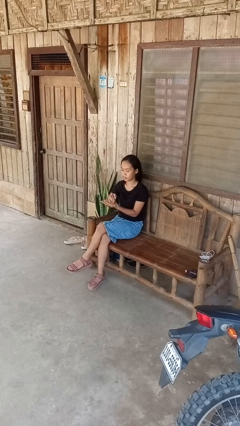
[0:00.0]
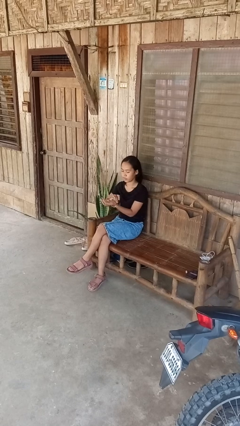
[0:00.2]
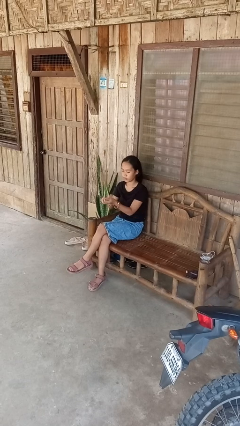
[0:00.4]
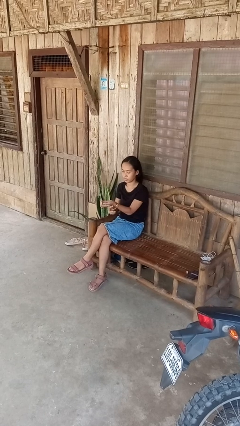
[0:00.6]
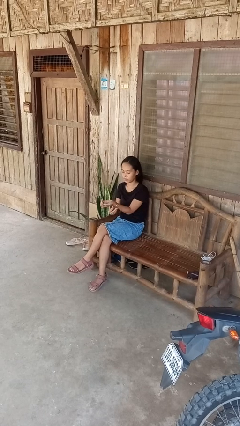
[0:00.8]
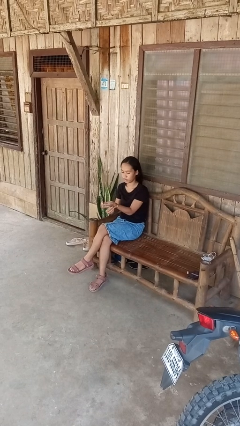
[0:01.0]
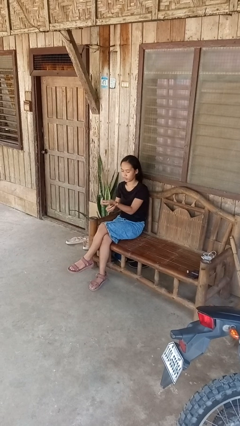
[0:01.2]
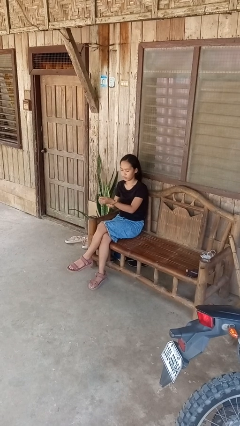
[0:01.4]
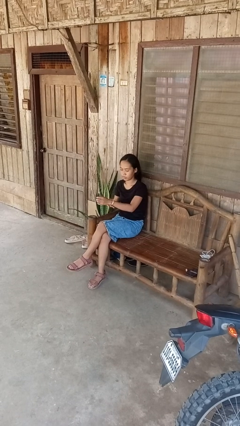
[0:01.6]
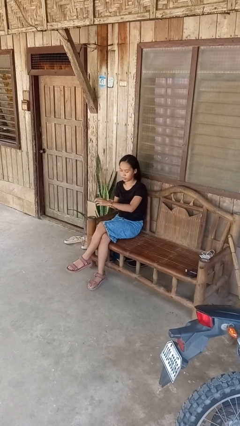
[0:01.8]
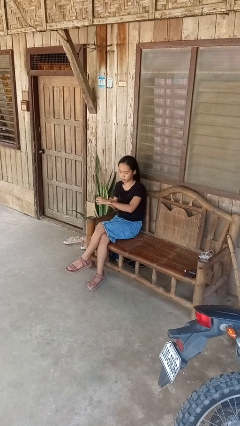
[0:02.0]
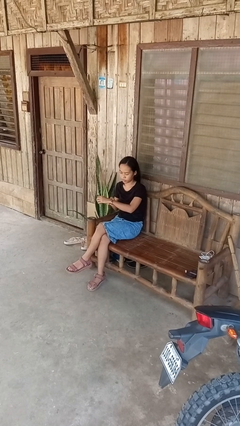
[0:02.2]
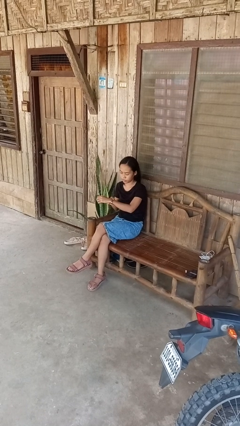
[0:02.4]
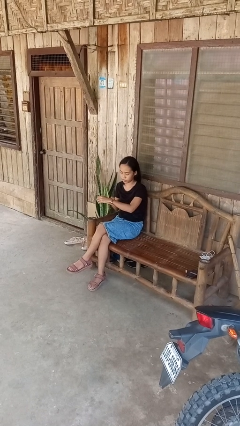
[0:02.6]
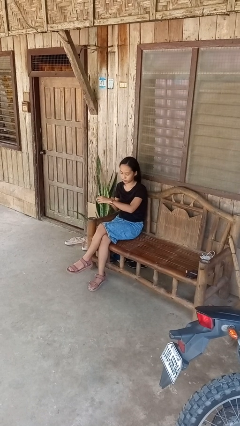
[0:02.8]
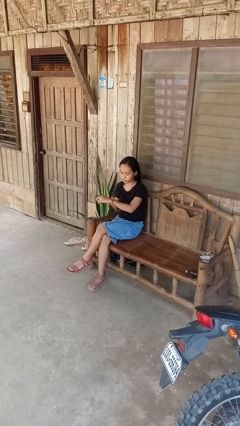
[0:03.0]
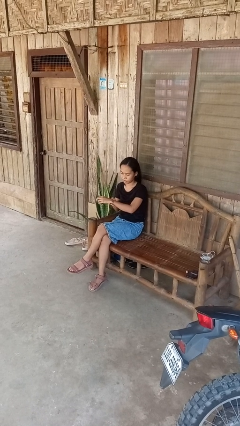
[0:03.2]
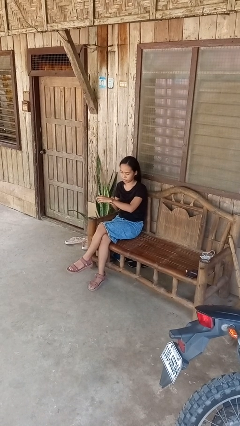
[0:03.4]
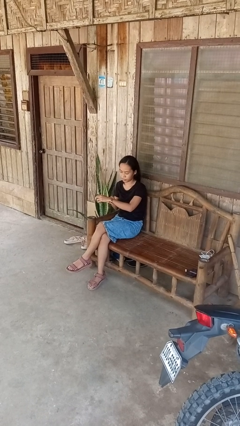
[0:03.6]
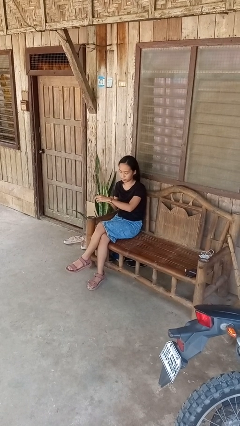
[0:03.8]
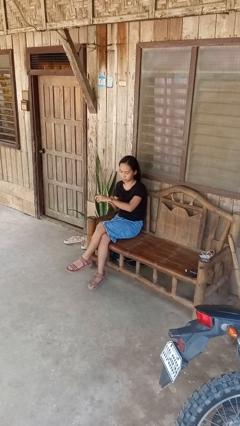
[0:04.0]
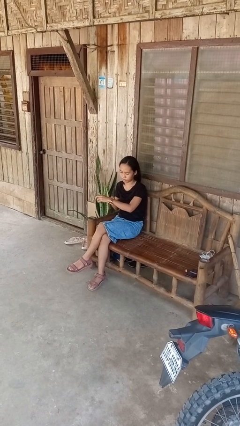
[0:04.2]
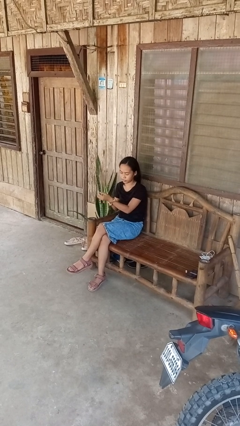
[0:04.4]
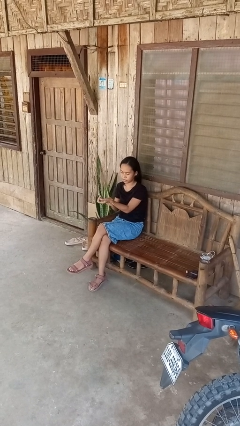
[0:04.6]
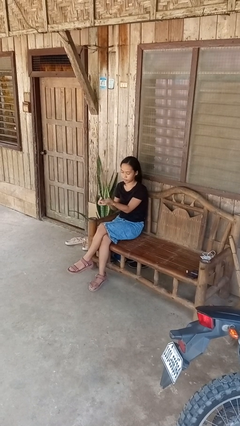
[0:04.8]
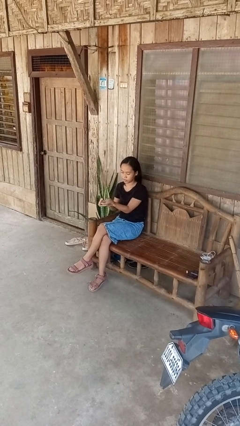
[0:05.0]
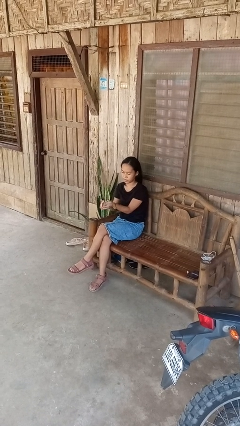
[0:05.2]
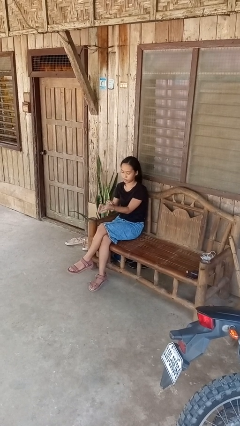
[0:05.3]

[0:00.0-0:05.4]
person puts on wristwatch

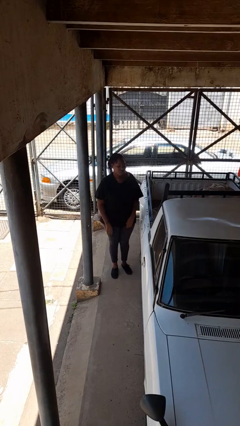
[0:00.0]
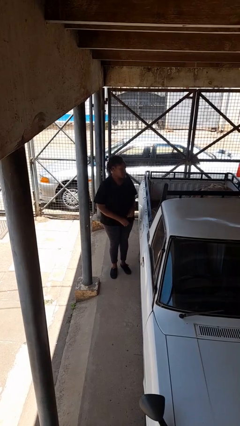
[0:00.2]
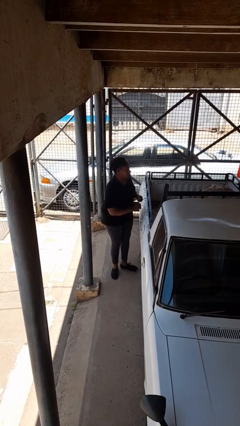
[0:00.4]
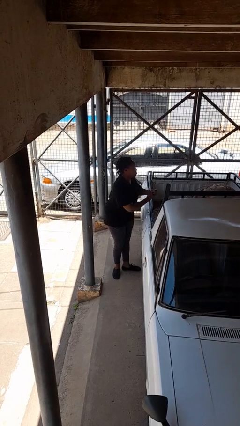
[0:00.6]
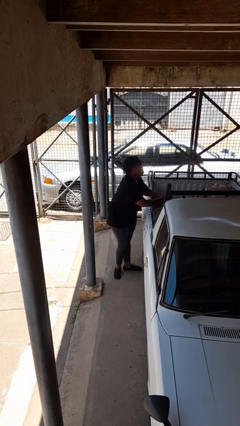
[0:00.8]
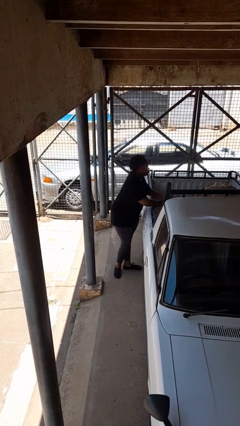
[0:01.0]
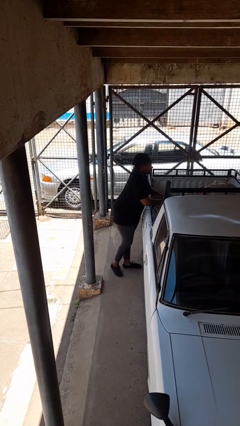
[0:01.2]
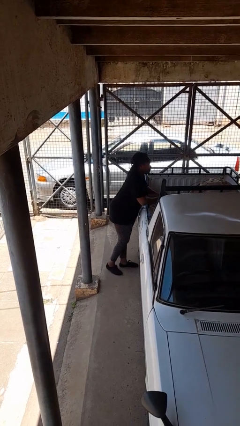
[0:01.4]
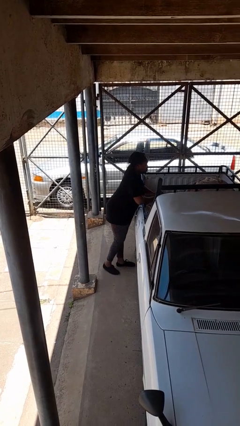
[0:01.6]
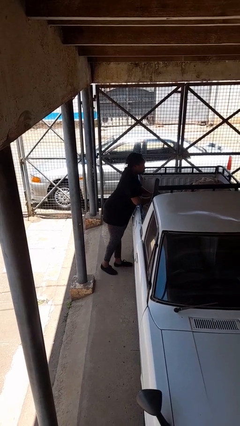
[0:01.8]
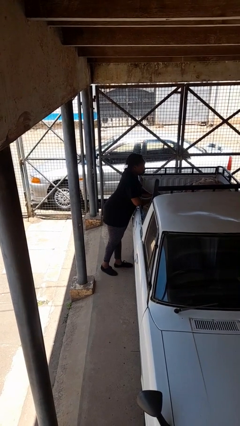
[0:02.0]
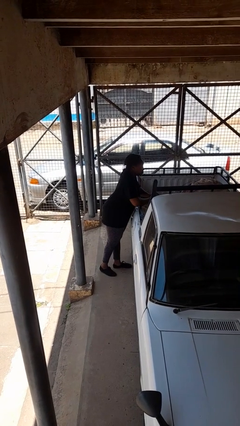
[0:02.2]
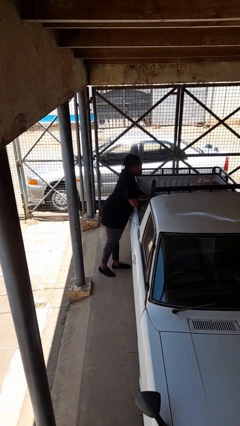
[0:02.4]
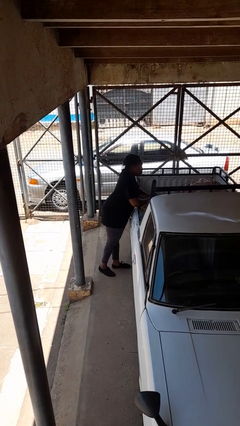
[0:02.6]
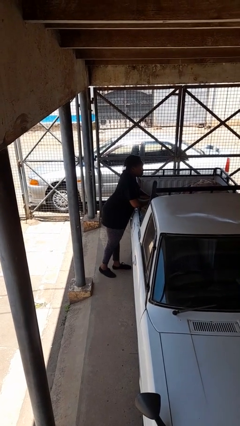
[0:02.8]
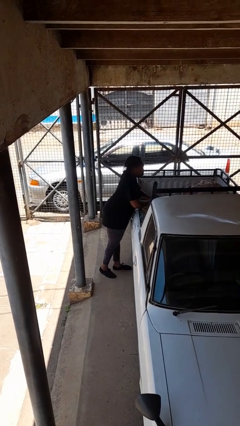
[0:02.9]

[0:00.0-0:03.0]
person leans against car

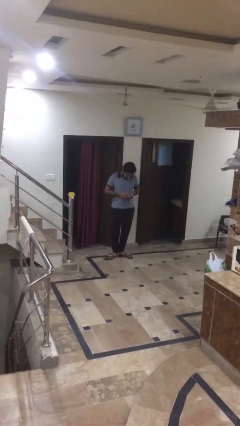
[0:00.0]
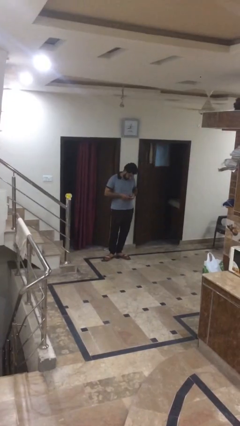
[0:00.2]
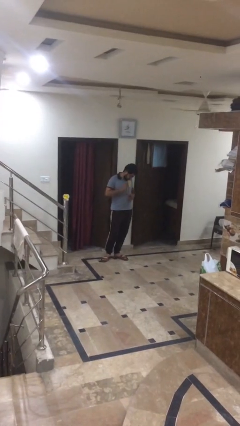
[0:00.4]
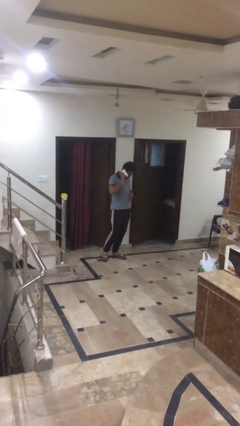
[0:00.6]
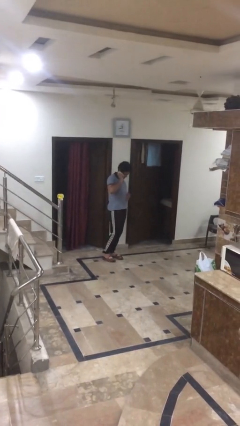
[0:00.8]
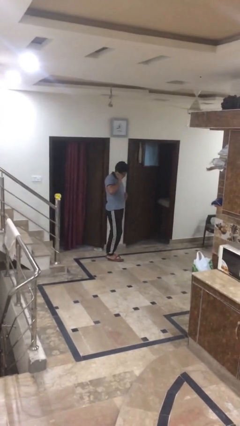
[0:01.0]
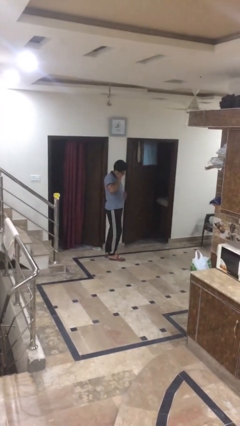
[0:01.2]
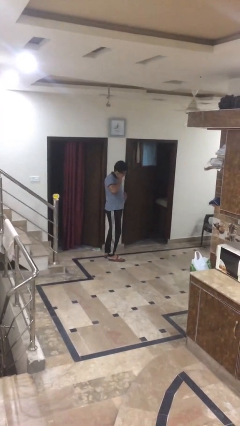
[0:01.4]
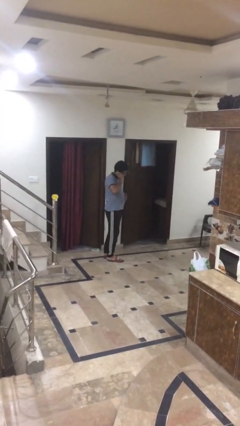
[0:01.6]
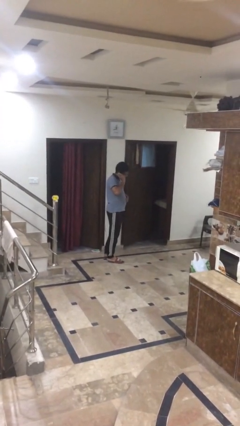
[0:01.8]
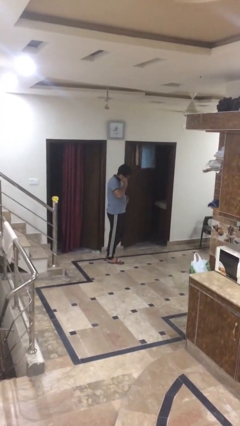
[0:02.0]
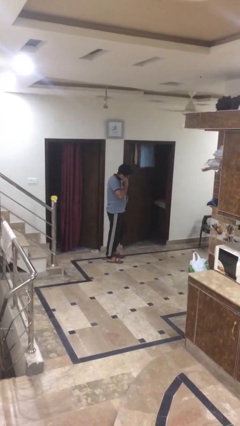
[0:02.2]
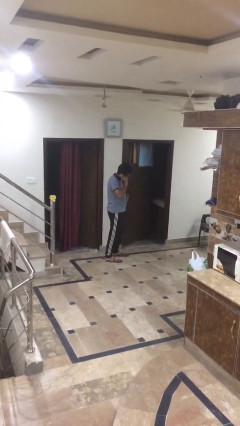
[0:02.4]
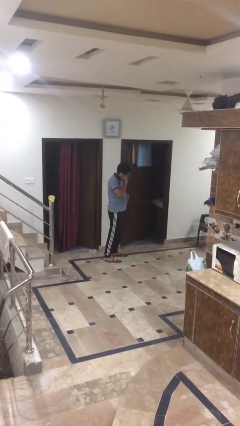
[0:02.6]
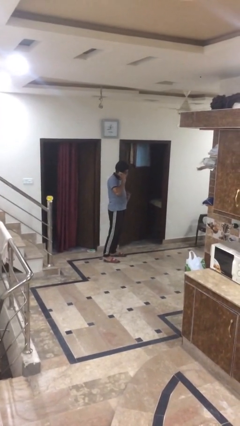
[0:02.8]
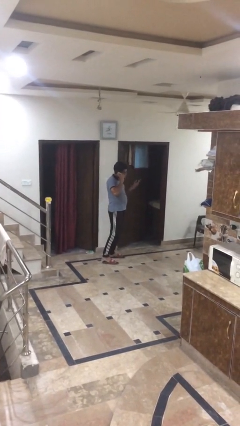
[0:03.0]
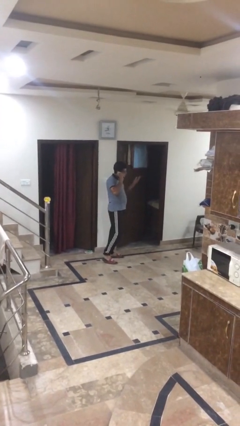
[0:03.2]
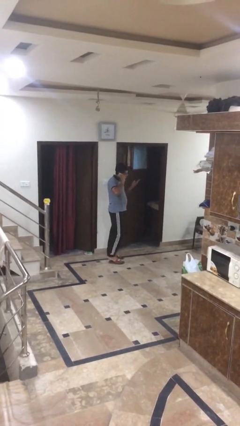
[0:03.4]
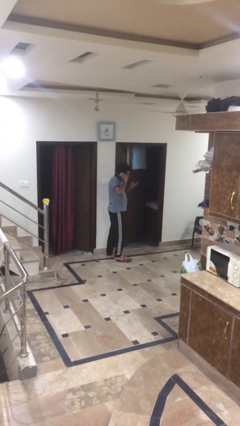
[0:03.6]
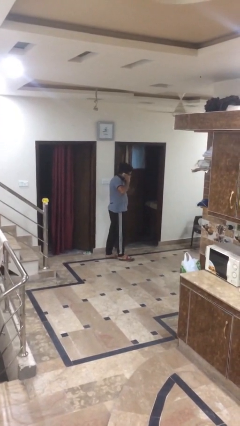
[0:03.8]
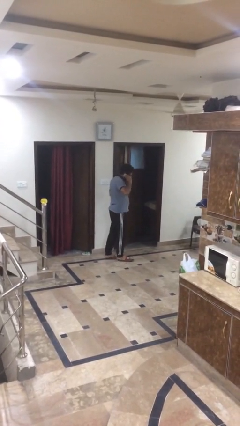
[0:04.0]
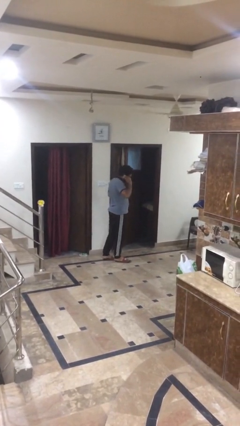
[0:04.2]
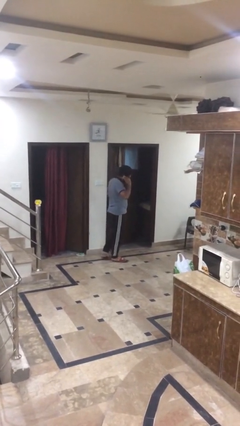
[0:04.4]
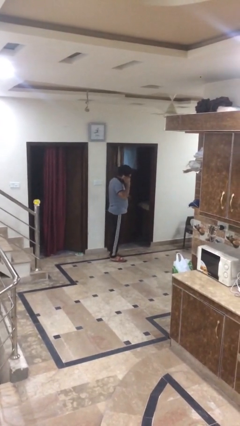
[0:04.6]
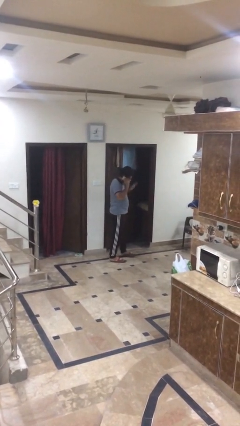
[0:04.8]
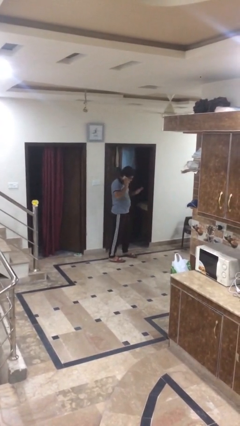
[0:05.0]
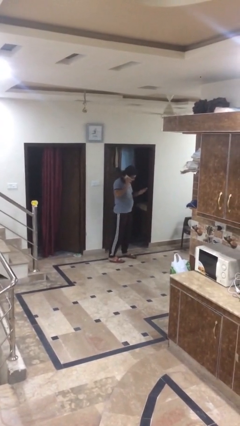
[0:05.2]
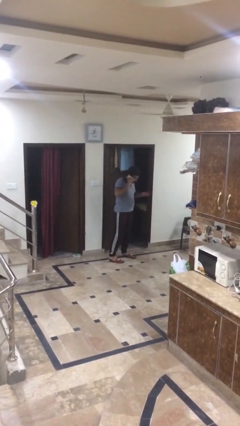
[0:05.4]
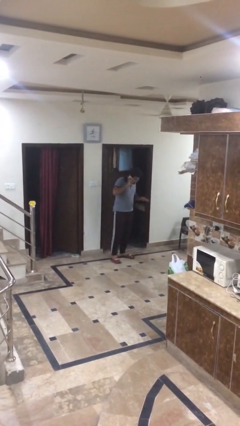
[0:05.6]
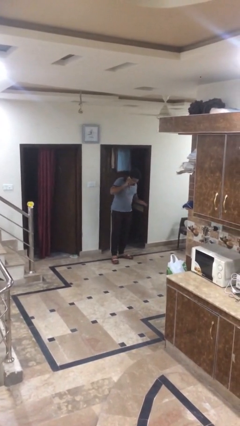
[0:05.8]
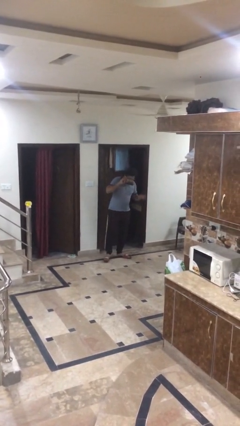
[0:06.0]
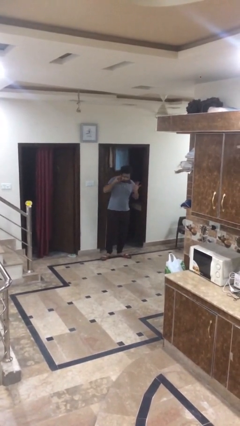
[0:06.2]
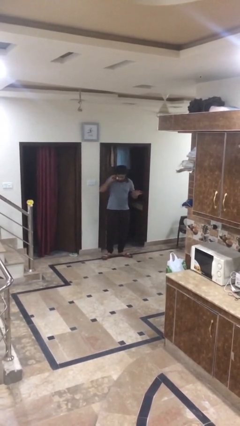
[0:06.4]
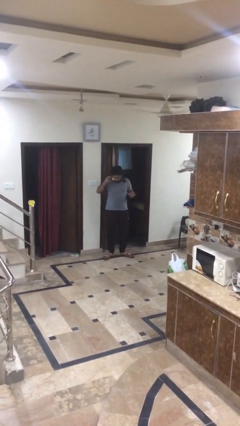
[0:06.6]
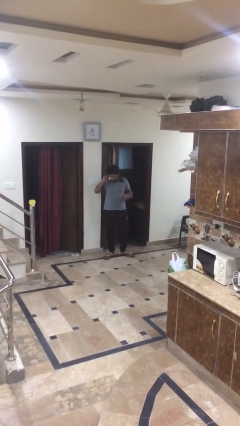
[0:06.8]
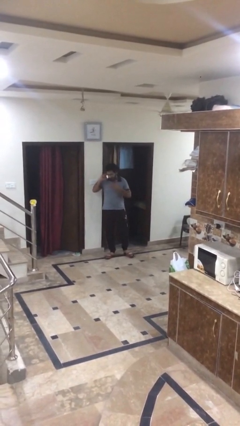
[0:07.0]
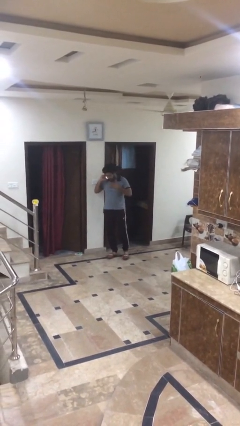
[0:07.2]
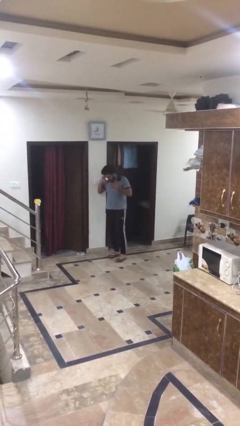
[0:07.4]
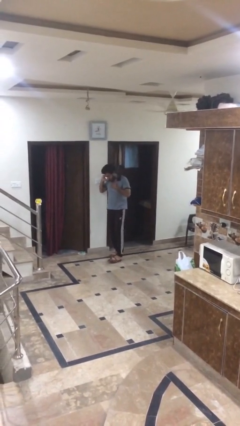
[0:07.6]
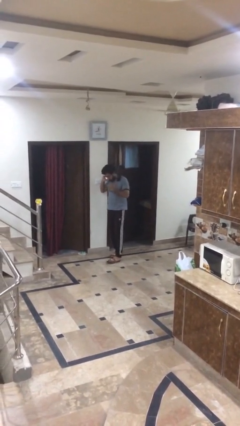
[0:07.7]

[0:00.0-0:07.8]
person talks on phone

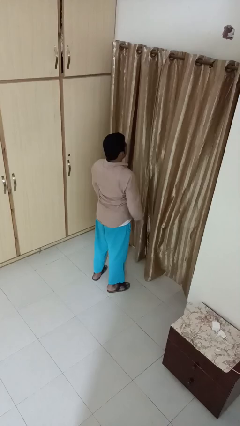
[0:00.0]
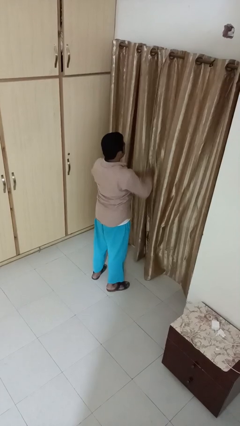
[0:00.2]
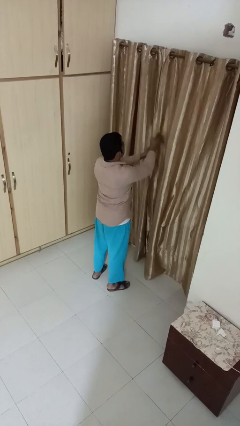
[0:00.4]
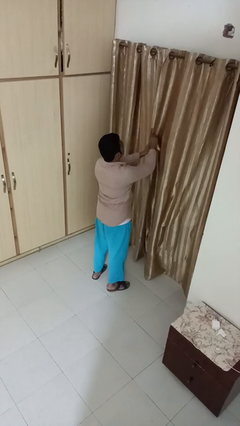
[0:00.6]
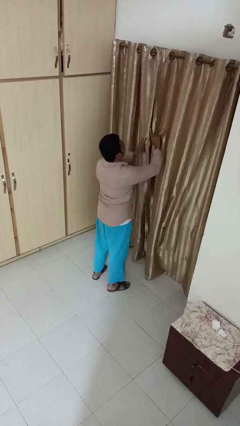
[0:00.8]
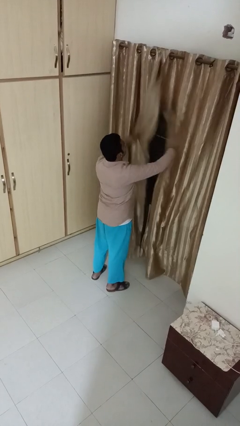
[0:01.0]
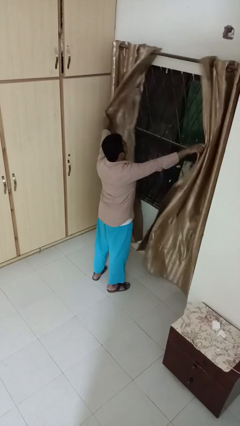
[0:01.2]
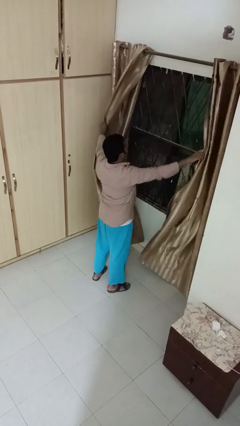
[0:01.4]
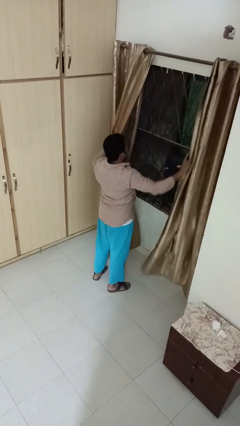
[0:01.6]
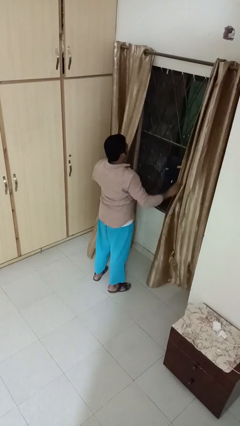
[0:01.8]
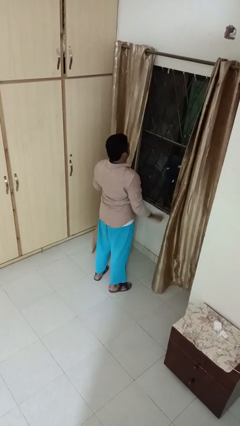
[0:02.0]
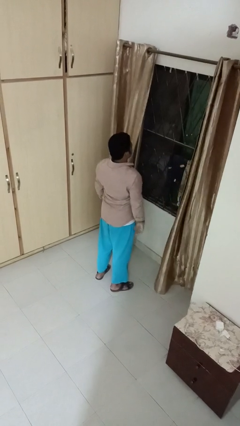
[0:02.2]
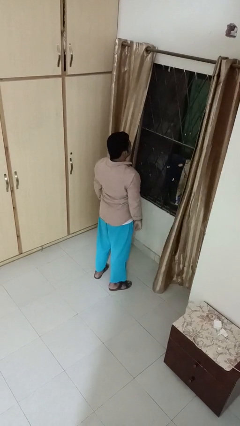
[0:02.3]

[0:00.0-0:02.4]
person opens curtains
